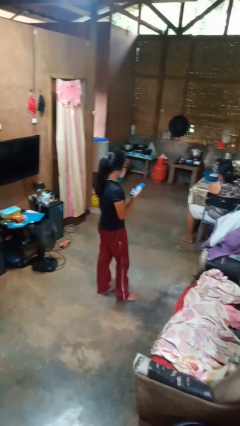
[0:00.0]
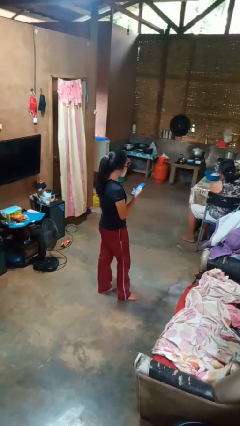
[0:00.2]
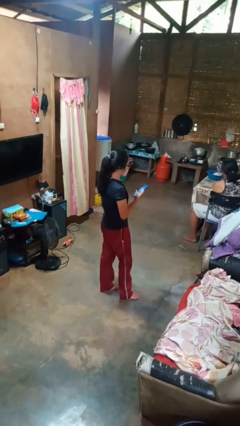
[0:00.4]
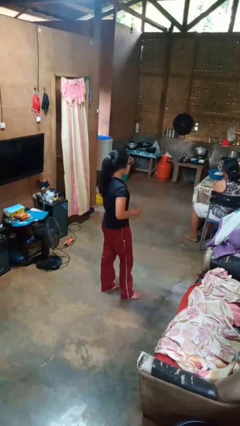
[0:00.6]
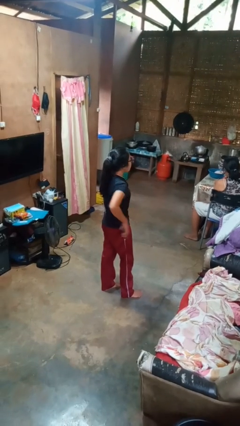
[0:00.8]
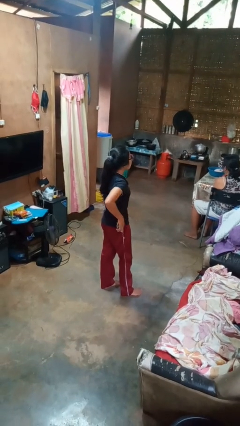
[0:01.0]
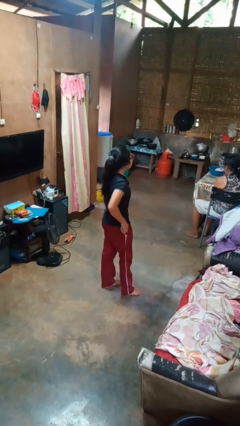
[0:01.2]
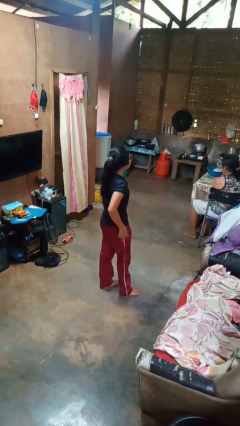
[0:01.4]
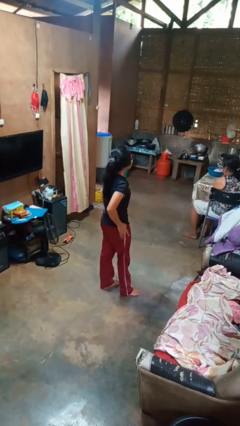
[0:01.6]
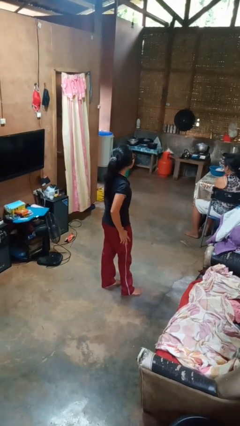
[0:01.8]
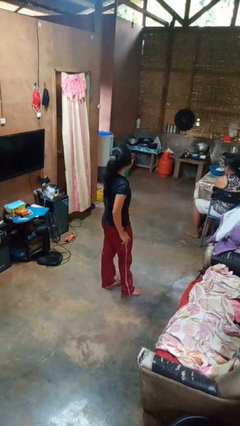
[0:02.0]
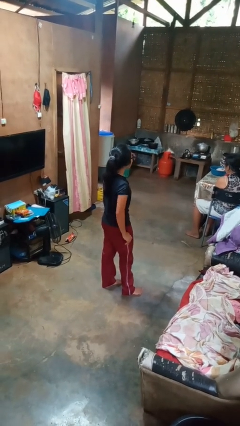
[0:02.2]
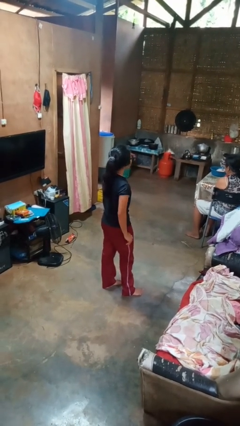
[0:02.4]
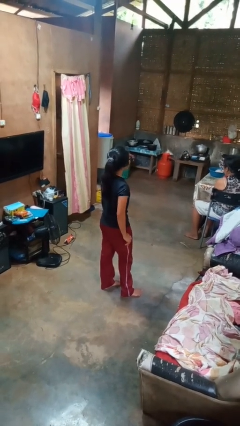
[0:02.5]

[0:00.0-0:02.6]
person puts phone into pocket

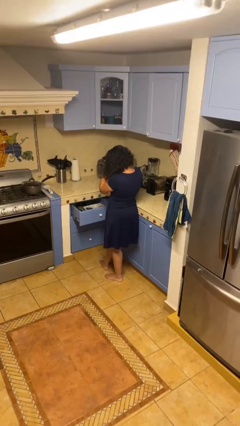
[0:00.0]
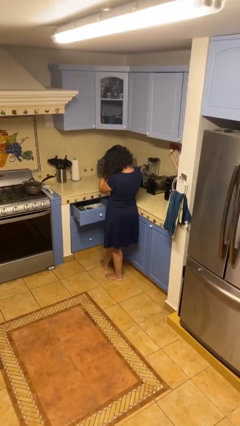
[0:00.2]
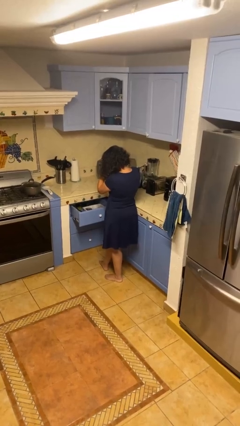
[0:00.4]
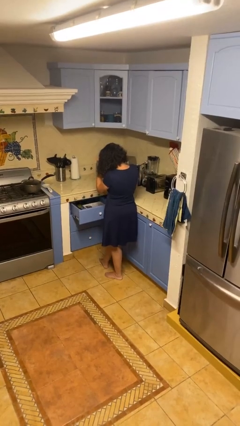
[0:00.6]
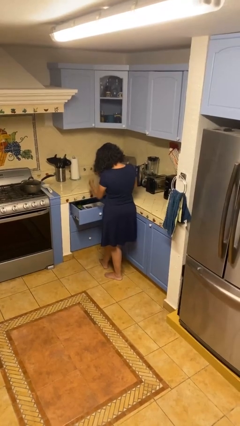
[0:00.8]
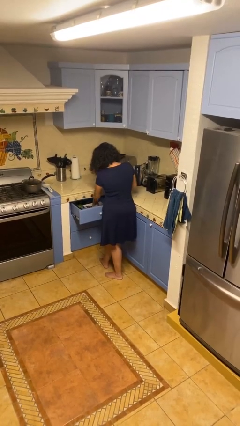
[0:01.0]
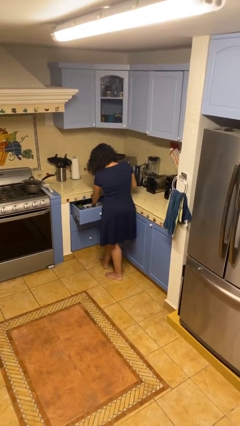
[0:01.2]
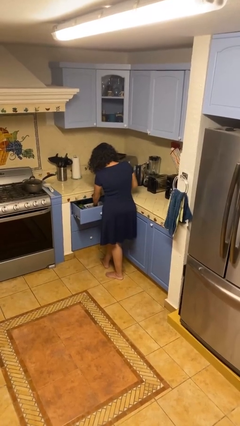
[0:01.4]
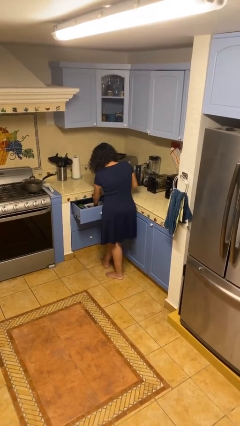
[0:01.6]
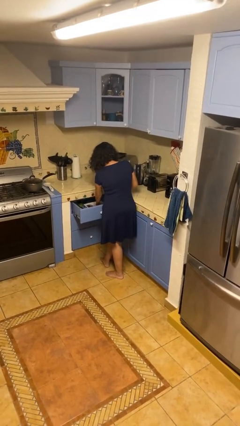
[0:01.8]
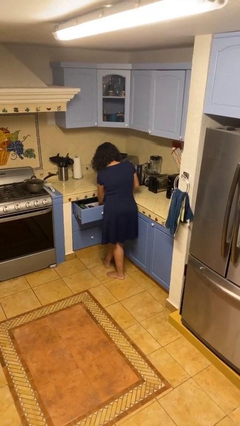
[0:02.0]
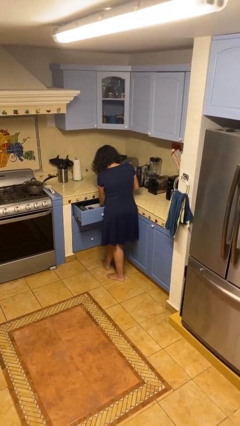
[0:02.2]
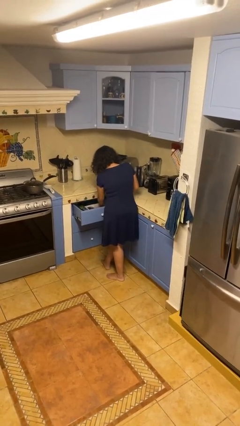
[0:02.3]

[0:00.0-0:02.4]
person searches in kitchen drawer

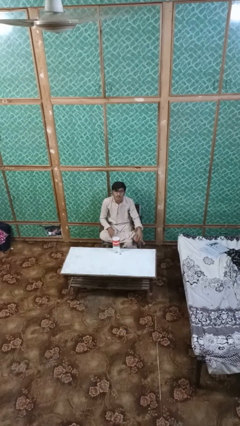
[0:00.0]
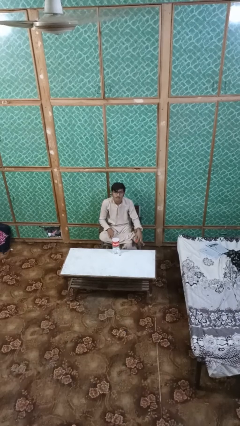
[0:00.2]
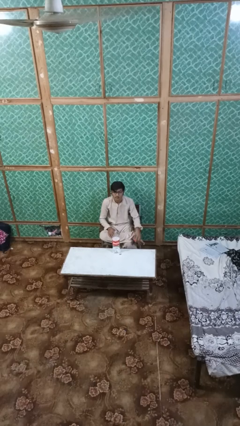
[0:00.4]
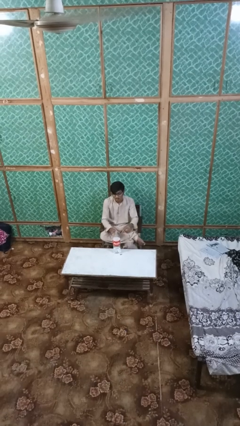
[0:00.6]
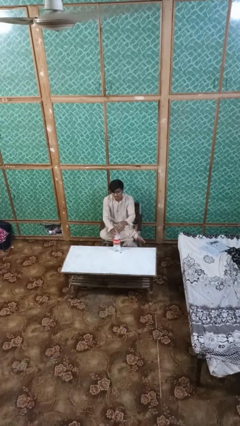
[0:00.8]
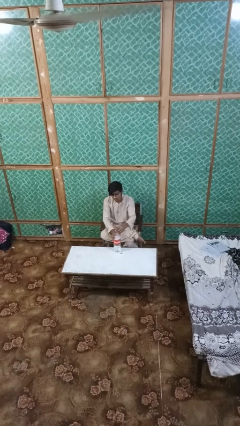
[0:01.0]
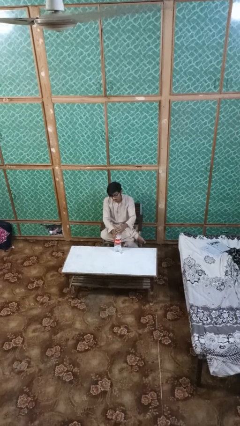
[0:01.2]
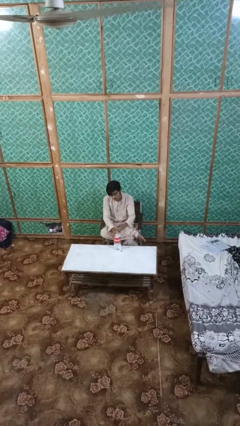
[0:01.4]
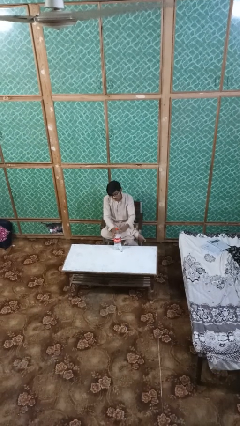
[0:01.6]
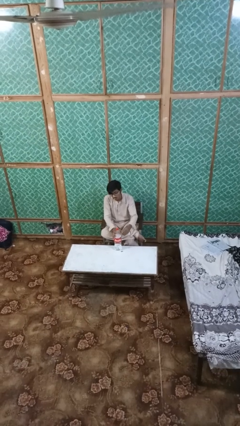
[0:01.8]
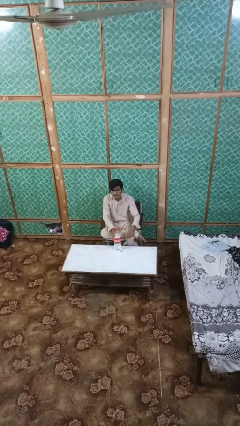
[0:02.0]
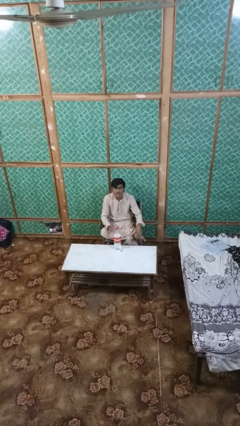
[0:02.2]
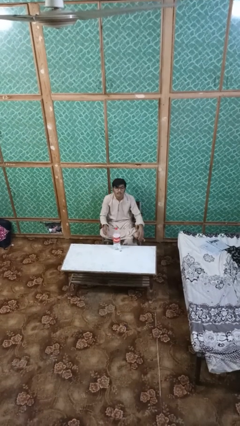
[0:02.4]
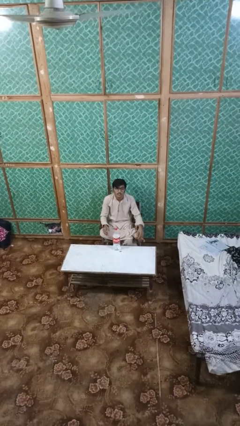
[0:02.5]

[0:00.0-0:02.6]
person screws lid to bottle

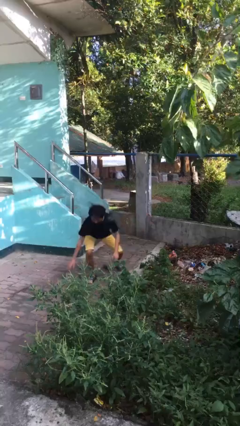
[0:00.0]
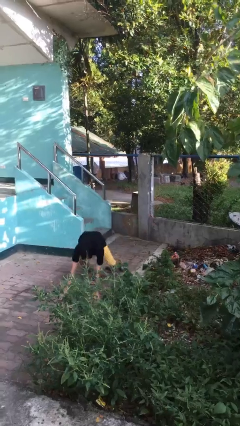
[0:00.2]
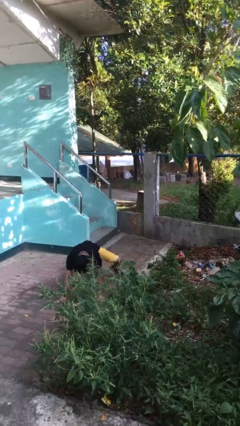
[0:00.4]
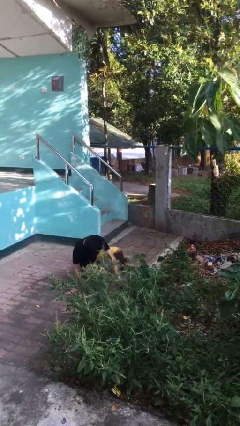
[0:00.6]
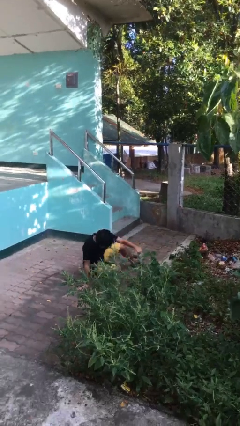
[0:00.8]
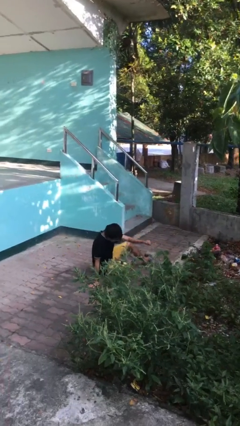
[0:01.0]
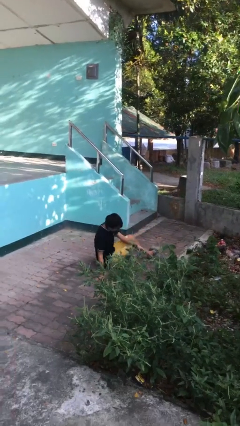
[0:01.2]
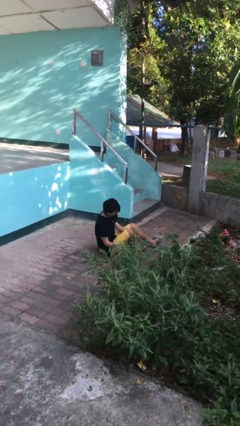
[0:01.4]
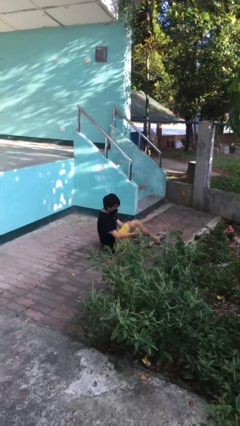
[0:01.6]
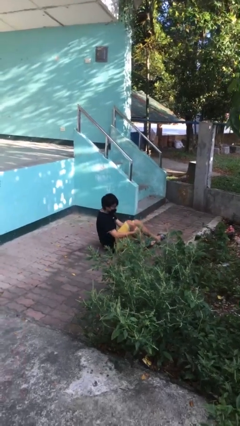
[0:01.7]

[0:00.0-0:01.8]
person trips on object on floor

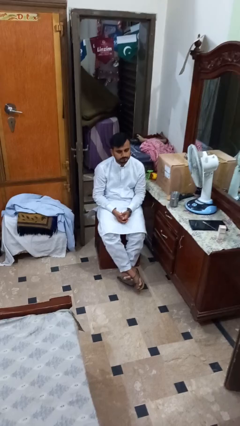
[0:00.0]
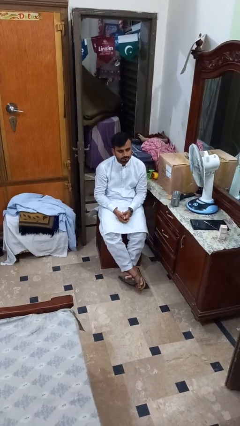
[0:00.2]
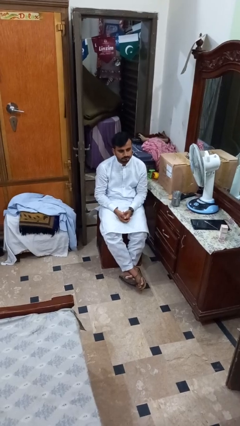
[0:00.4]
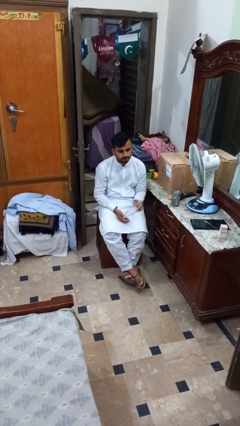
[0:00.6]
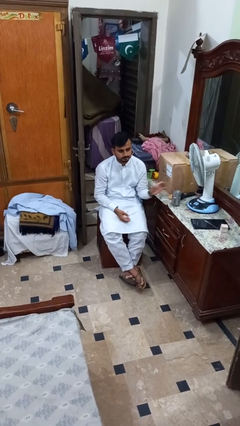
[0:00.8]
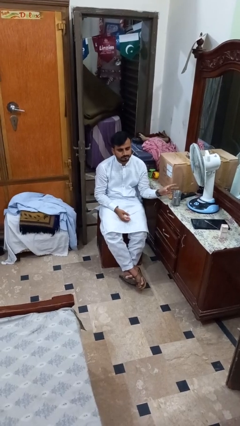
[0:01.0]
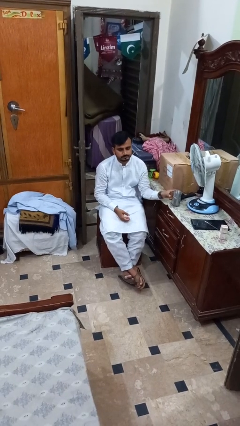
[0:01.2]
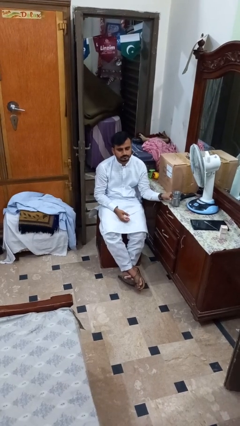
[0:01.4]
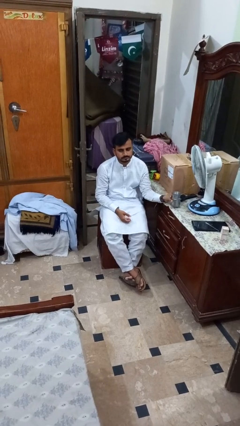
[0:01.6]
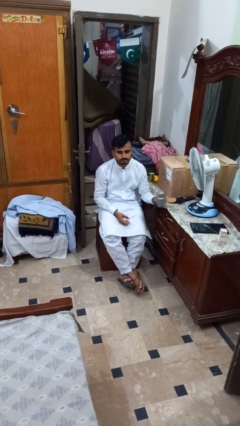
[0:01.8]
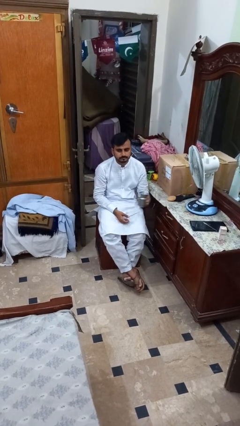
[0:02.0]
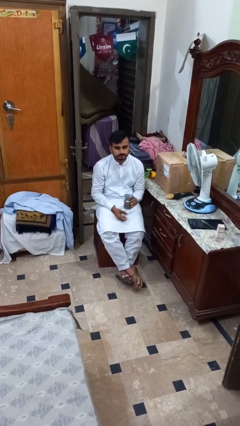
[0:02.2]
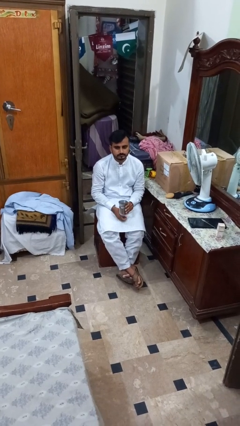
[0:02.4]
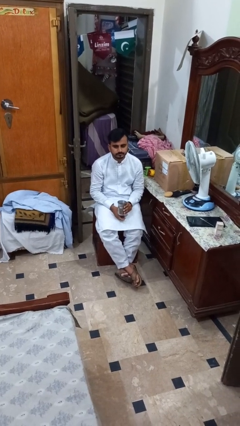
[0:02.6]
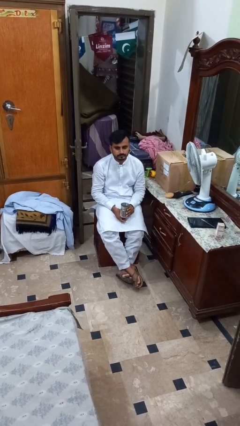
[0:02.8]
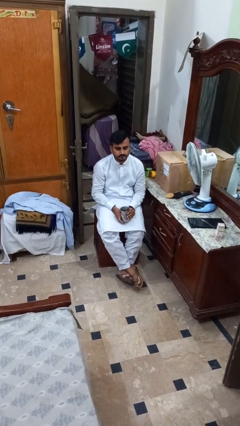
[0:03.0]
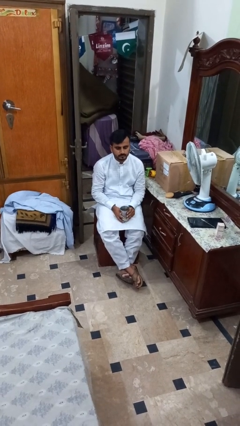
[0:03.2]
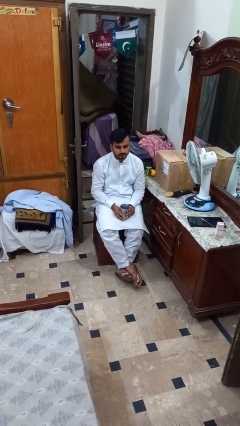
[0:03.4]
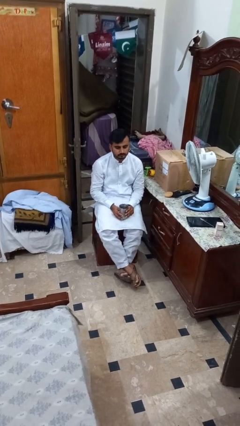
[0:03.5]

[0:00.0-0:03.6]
person picks up object from table

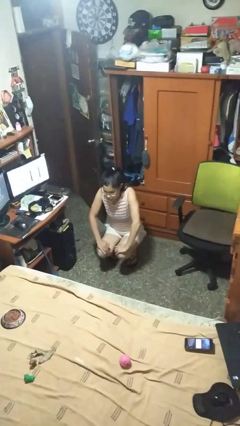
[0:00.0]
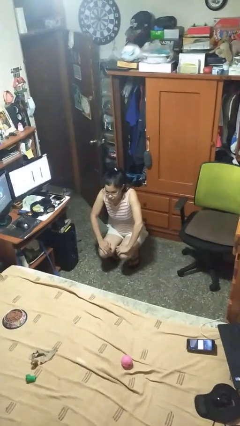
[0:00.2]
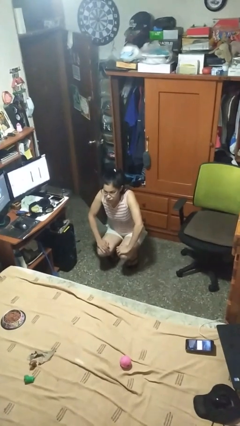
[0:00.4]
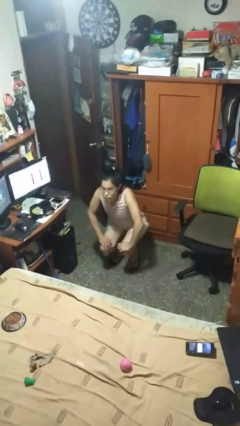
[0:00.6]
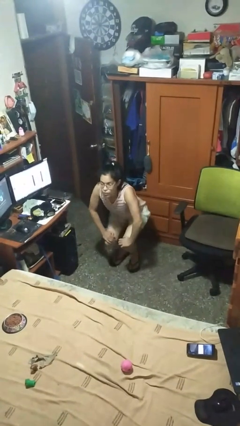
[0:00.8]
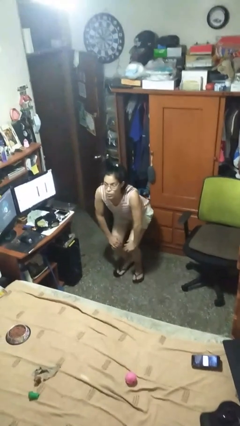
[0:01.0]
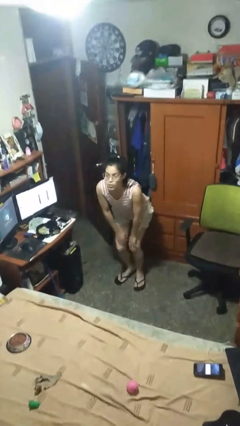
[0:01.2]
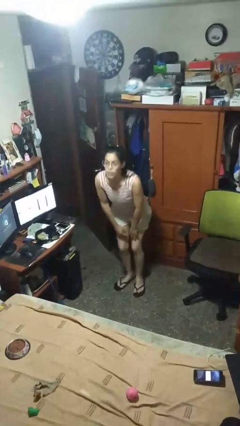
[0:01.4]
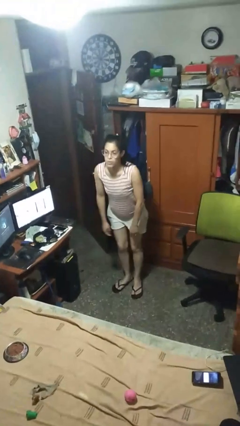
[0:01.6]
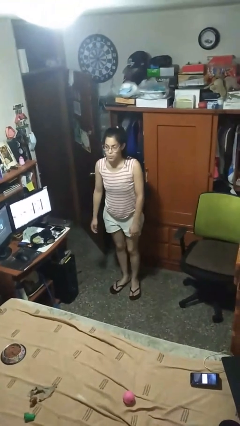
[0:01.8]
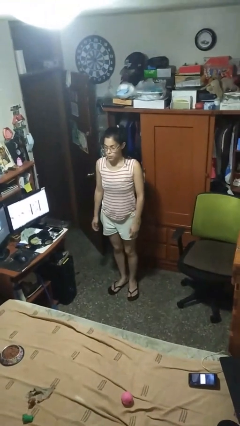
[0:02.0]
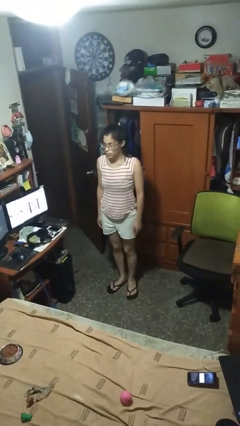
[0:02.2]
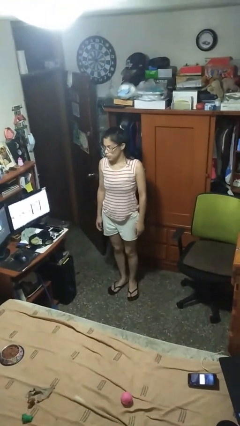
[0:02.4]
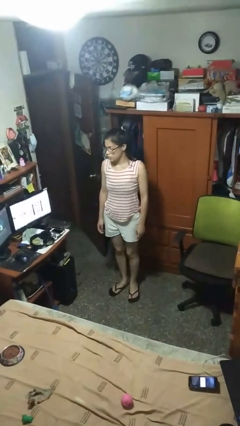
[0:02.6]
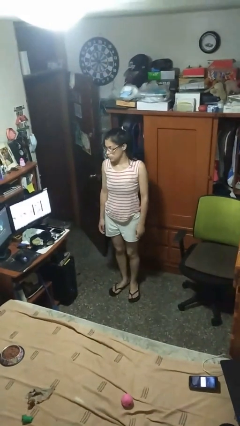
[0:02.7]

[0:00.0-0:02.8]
person stands up

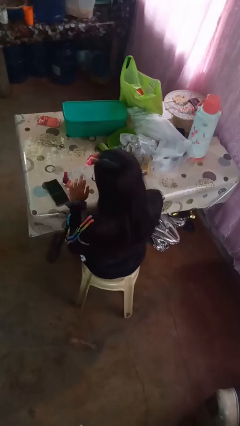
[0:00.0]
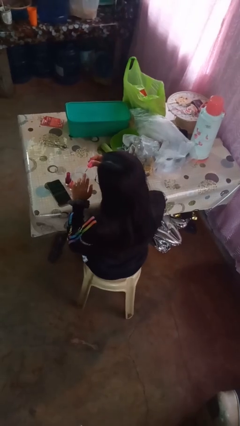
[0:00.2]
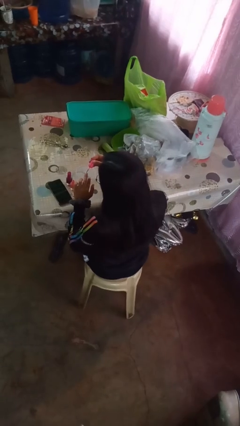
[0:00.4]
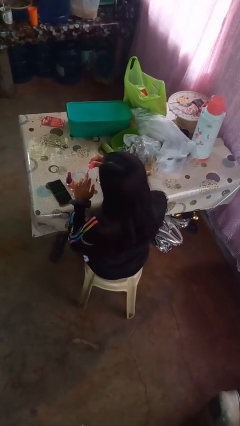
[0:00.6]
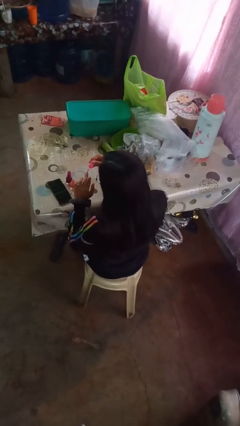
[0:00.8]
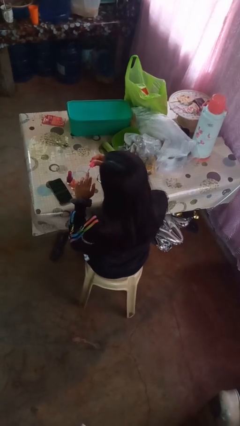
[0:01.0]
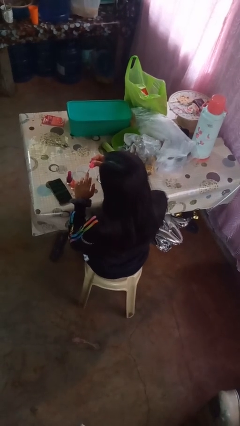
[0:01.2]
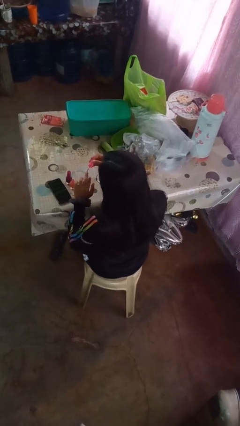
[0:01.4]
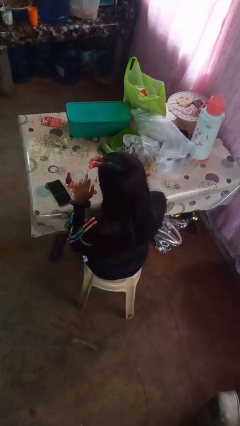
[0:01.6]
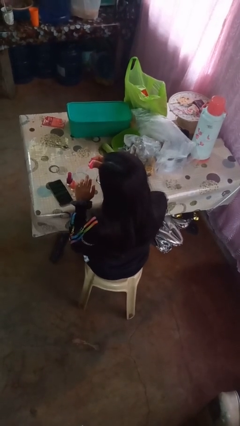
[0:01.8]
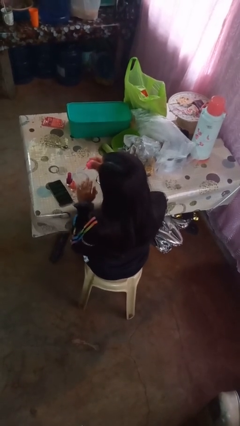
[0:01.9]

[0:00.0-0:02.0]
person paints fingernails
